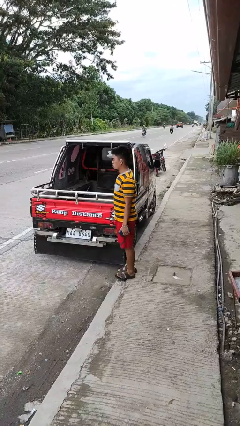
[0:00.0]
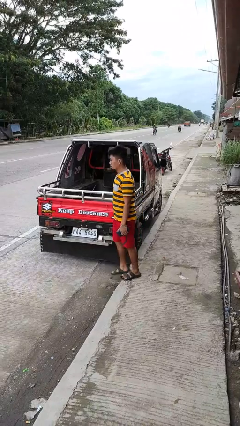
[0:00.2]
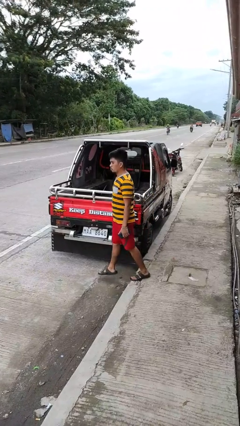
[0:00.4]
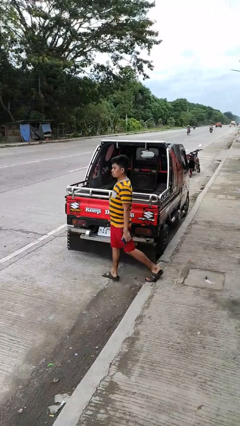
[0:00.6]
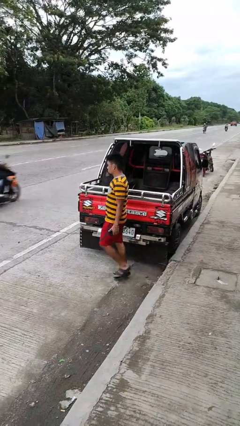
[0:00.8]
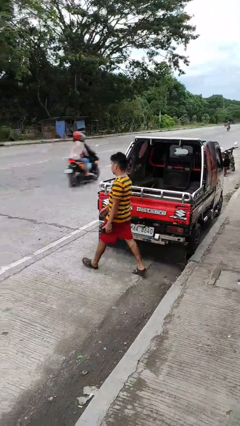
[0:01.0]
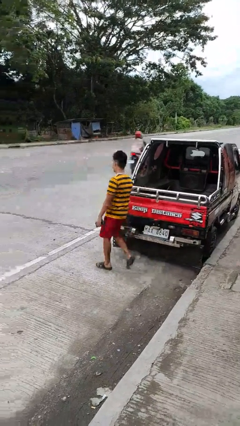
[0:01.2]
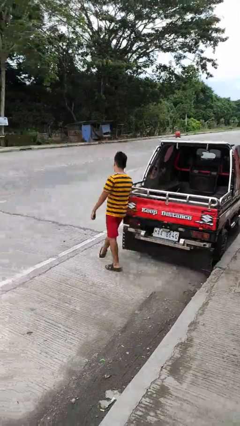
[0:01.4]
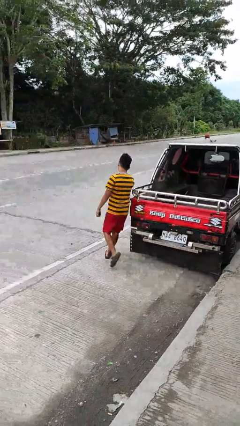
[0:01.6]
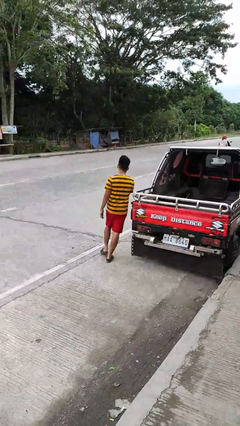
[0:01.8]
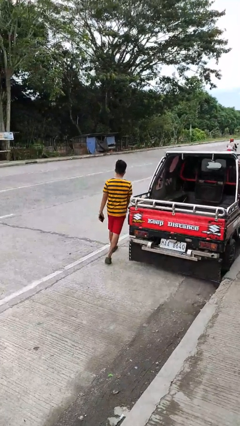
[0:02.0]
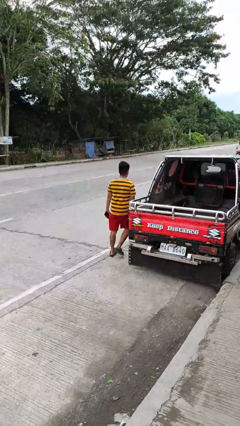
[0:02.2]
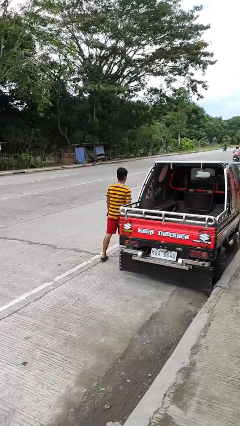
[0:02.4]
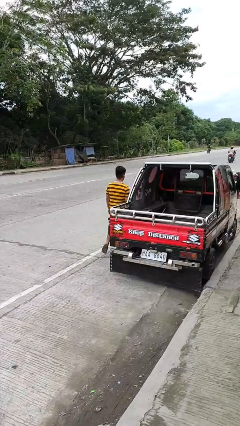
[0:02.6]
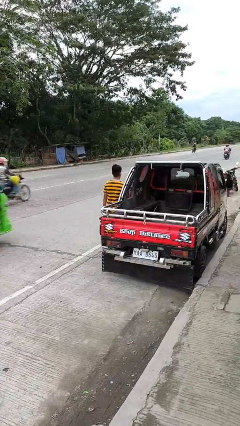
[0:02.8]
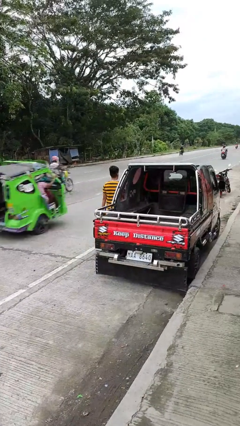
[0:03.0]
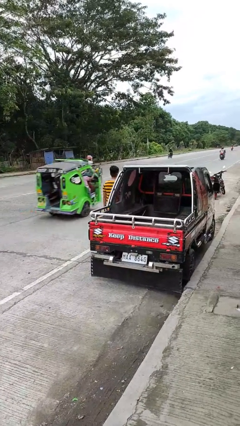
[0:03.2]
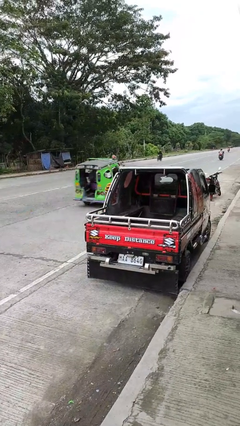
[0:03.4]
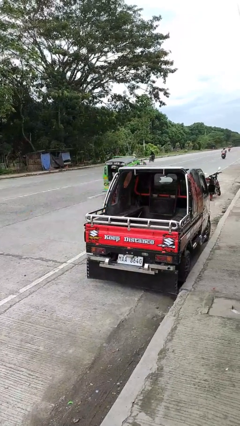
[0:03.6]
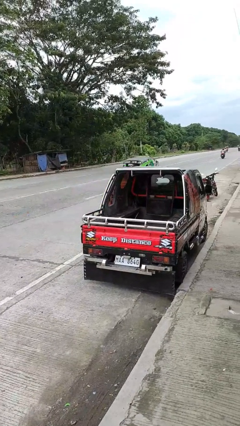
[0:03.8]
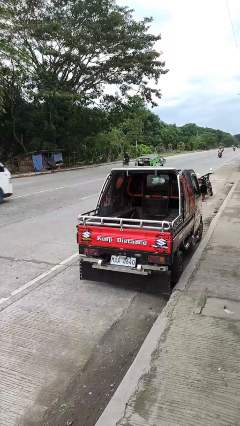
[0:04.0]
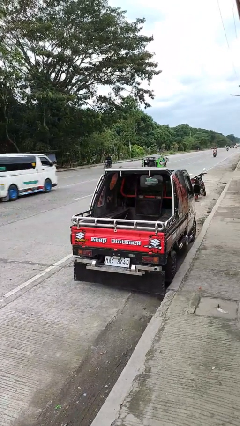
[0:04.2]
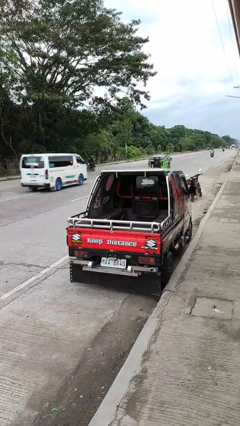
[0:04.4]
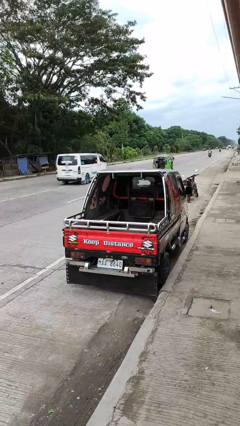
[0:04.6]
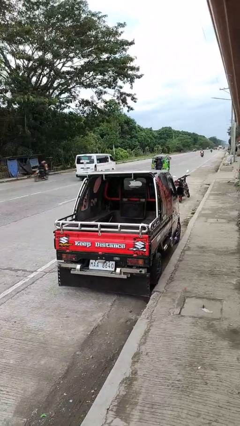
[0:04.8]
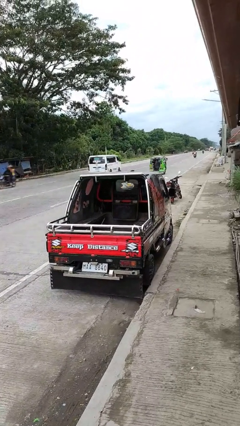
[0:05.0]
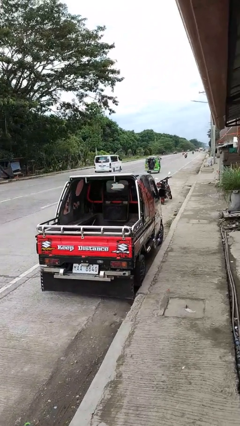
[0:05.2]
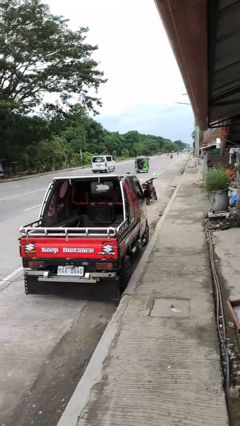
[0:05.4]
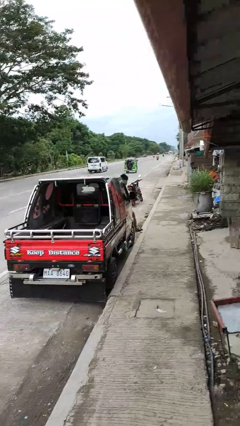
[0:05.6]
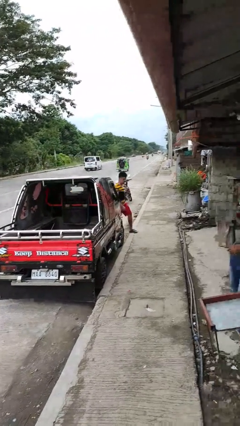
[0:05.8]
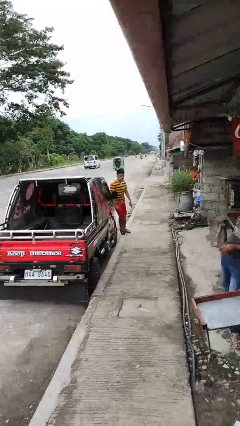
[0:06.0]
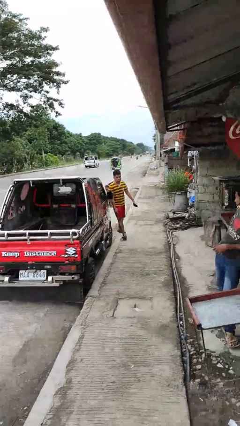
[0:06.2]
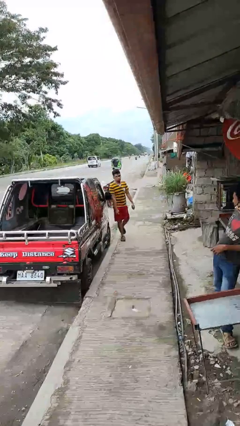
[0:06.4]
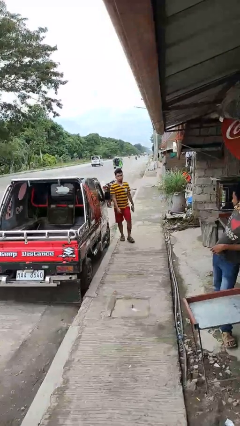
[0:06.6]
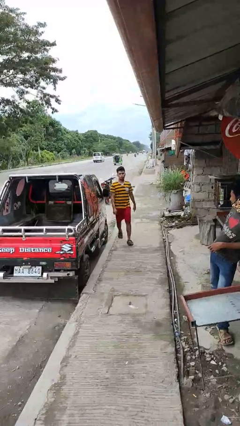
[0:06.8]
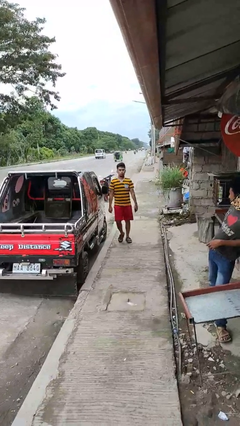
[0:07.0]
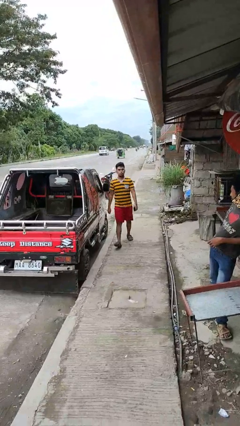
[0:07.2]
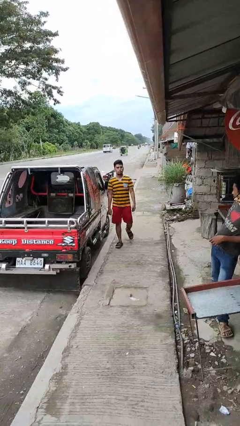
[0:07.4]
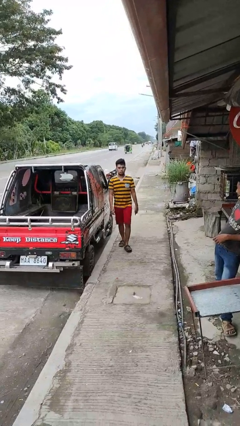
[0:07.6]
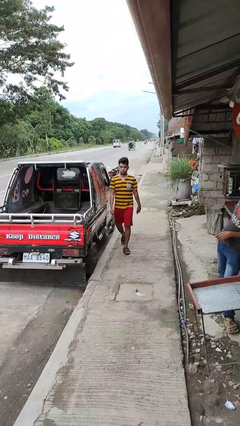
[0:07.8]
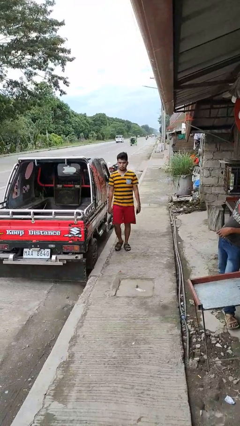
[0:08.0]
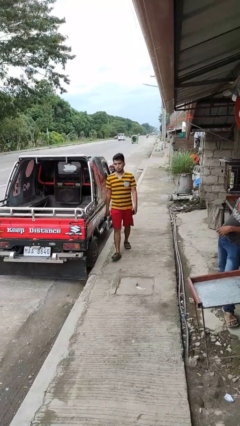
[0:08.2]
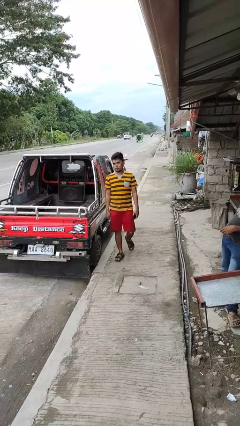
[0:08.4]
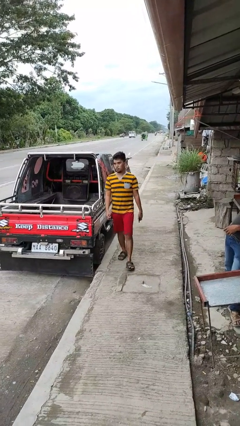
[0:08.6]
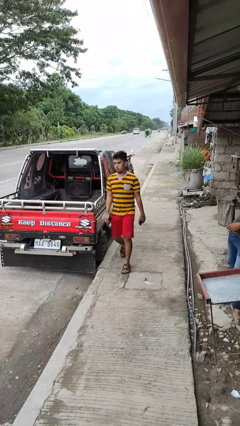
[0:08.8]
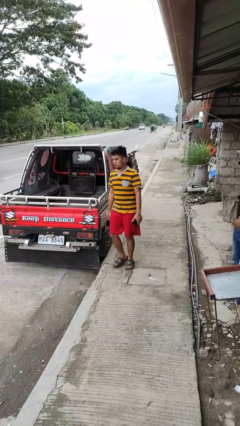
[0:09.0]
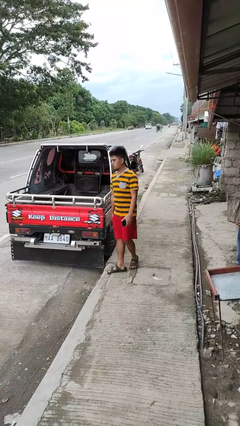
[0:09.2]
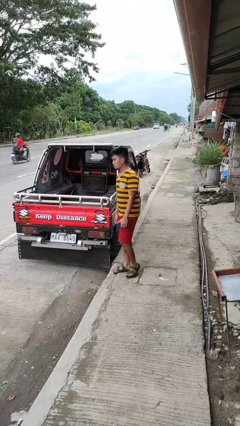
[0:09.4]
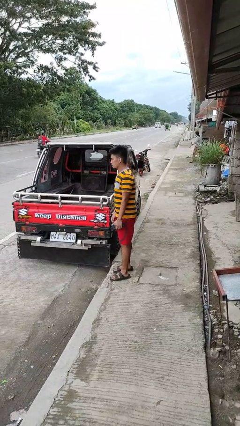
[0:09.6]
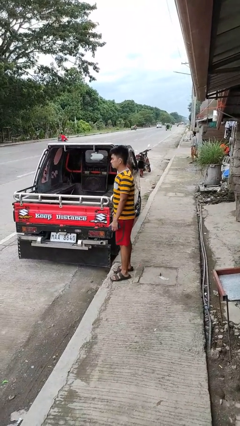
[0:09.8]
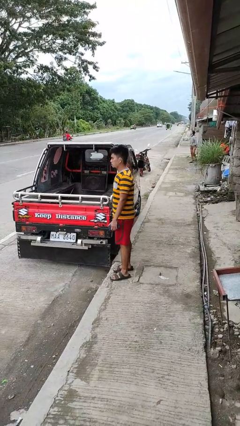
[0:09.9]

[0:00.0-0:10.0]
person walks around car

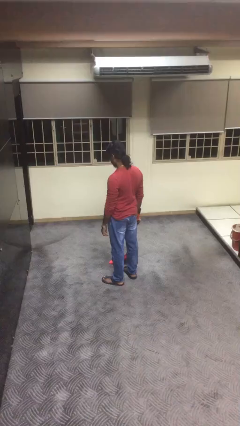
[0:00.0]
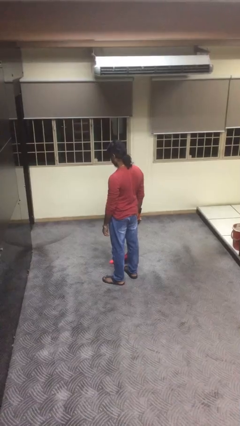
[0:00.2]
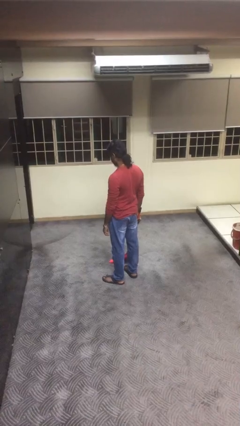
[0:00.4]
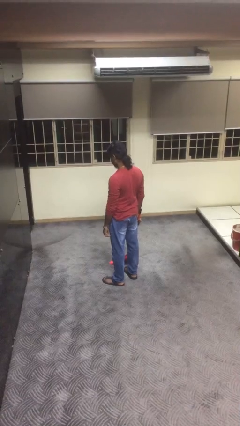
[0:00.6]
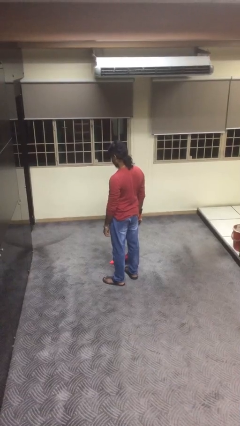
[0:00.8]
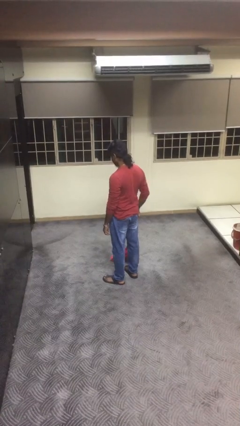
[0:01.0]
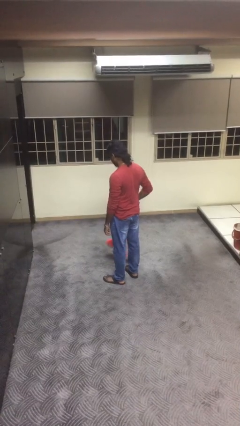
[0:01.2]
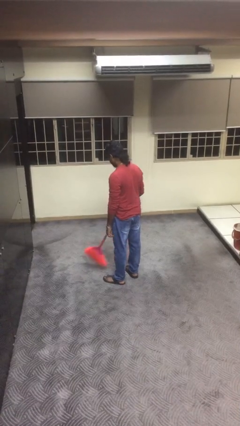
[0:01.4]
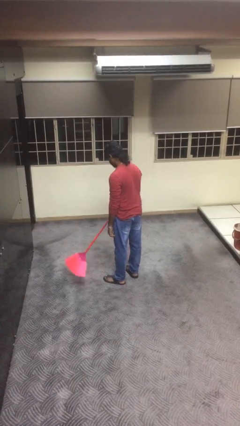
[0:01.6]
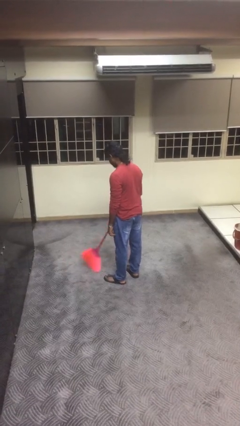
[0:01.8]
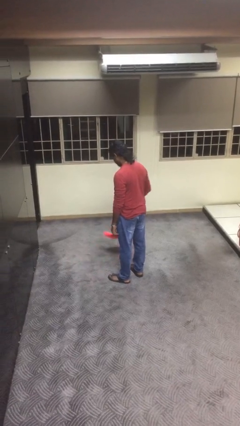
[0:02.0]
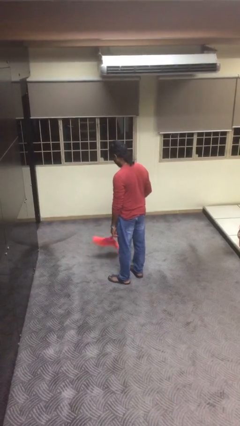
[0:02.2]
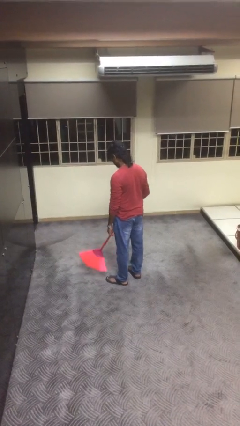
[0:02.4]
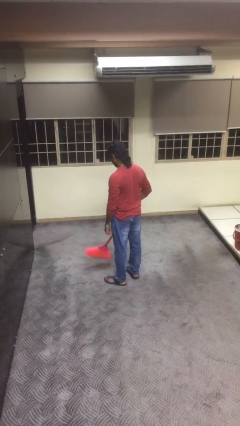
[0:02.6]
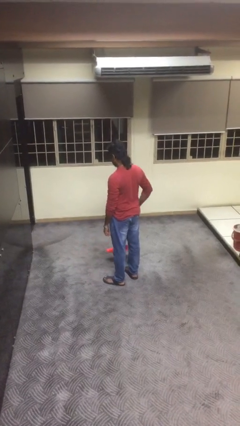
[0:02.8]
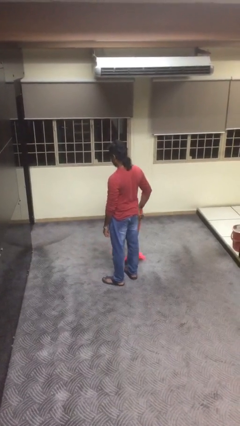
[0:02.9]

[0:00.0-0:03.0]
person sweeps floor

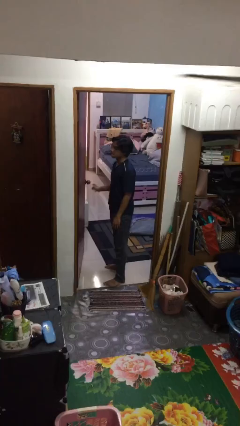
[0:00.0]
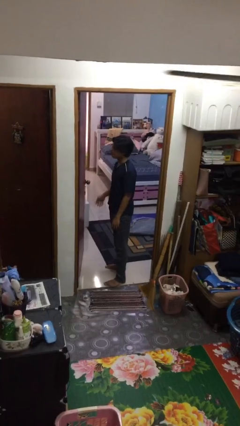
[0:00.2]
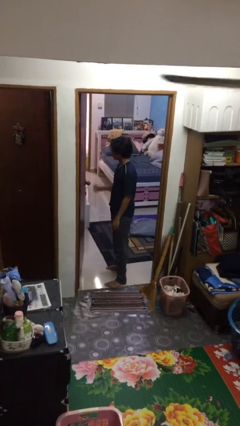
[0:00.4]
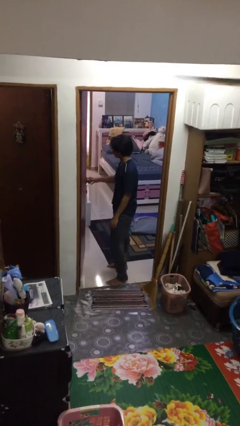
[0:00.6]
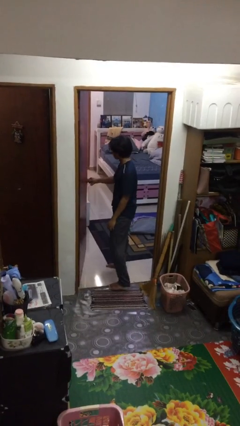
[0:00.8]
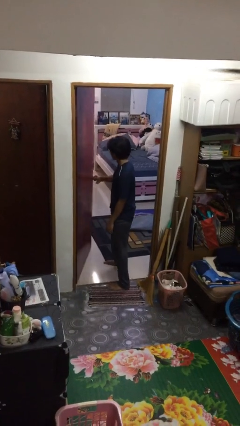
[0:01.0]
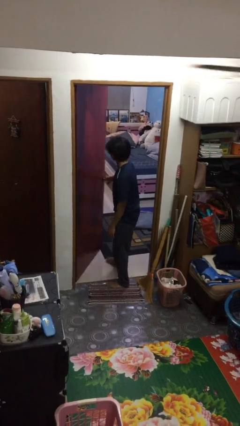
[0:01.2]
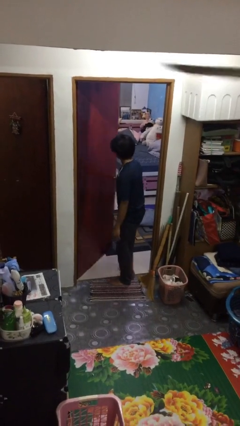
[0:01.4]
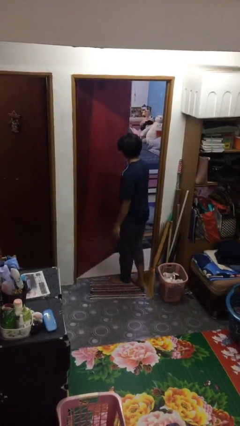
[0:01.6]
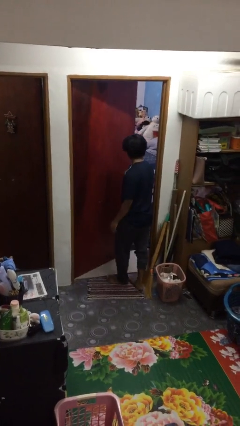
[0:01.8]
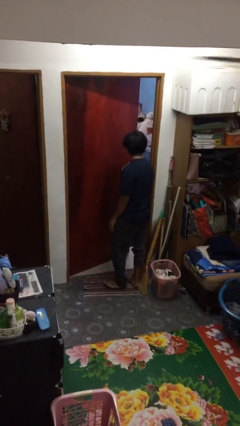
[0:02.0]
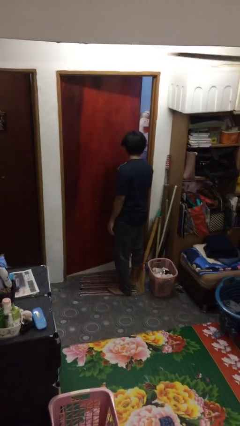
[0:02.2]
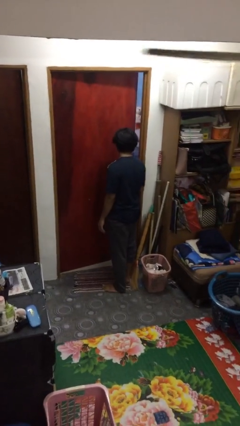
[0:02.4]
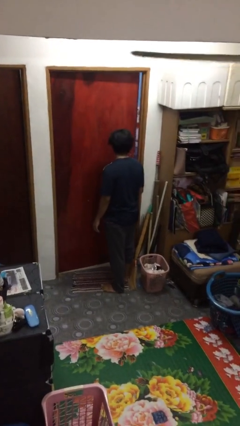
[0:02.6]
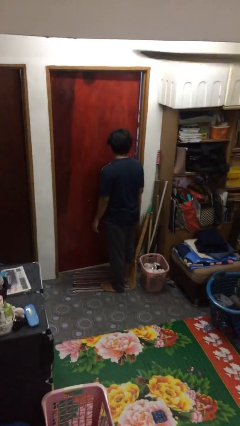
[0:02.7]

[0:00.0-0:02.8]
person closes facility door

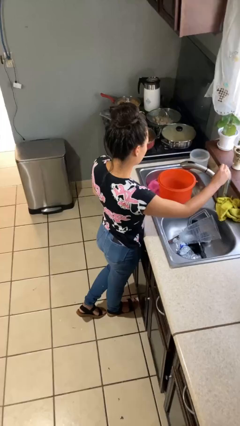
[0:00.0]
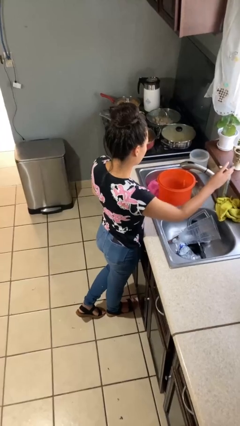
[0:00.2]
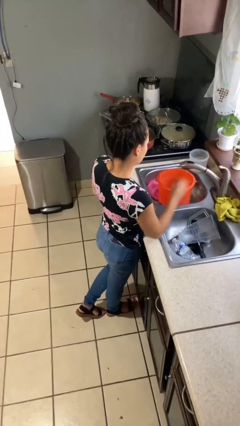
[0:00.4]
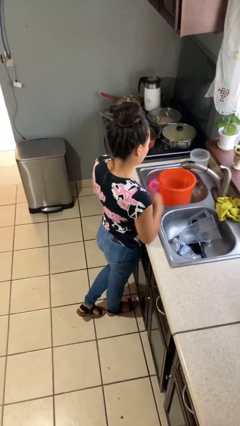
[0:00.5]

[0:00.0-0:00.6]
person turns on faucet

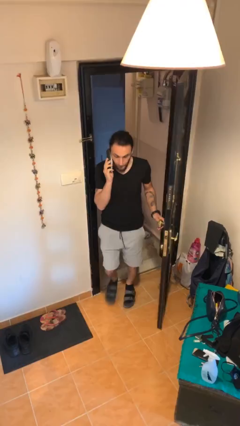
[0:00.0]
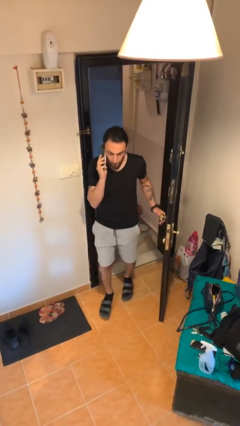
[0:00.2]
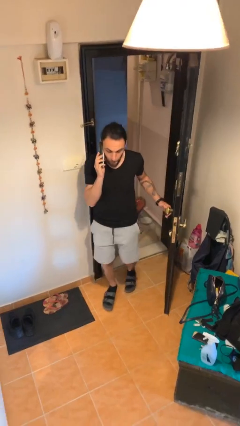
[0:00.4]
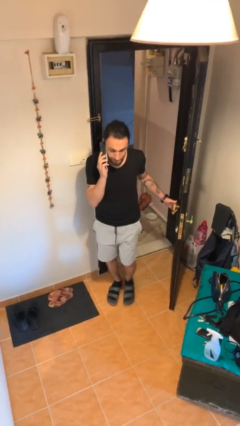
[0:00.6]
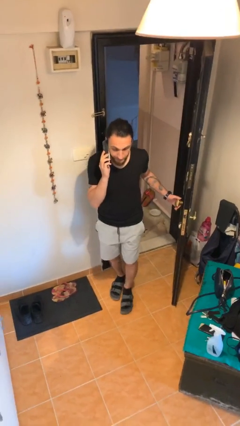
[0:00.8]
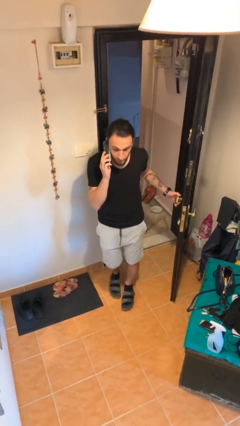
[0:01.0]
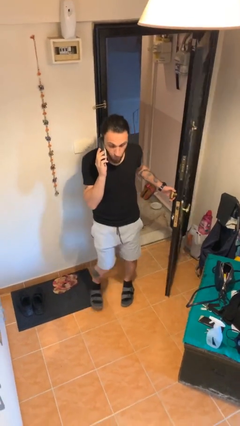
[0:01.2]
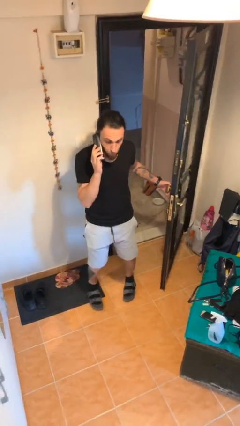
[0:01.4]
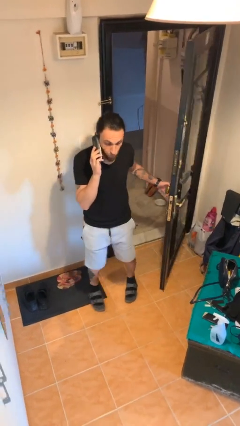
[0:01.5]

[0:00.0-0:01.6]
person enters scene through structure
